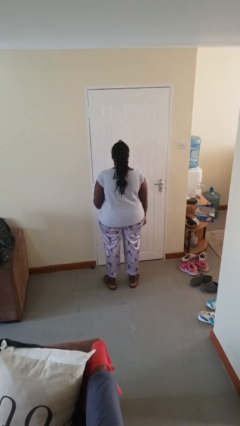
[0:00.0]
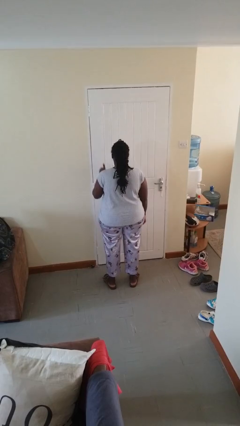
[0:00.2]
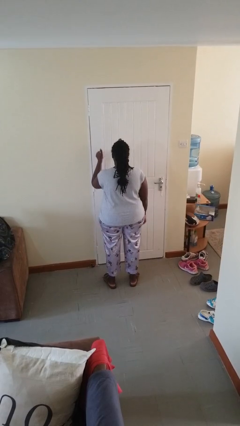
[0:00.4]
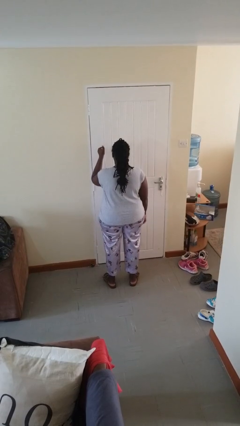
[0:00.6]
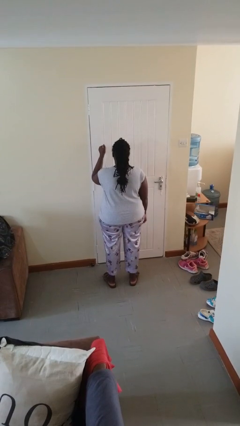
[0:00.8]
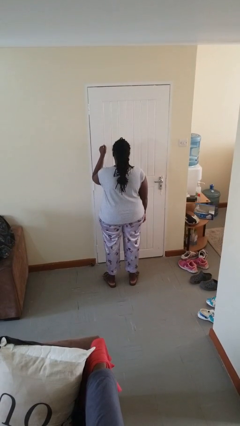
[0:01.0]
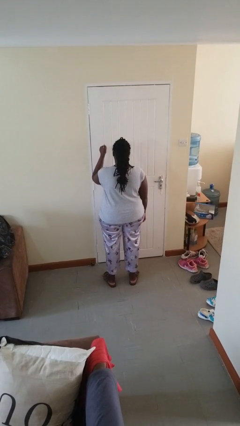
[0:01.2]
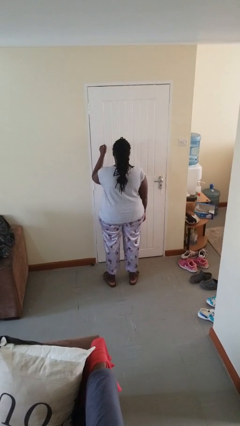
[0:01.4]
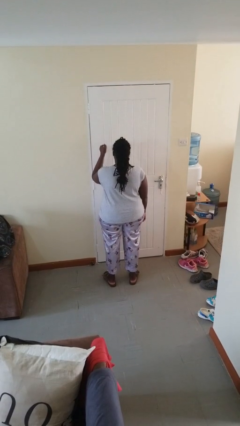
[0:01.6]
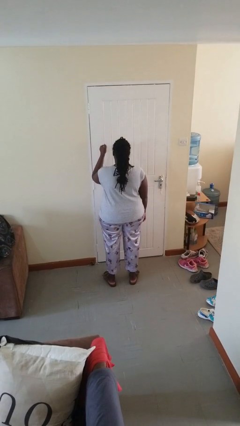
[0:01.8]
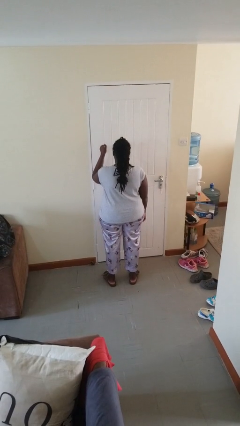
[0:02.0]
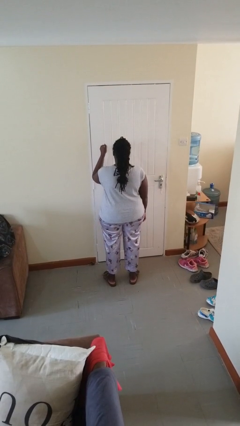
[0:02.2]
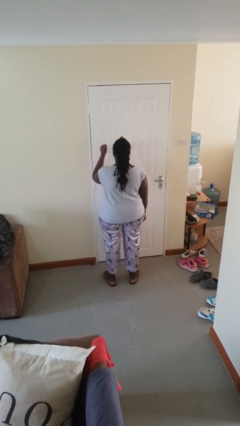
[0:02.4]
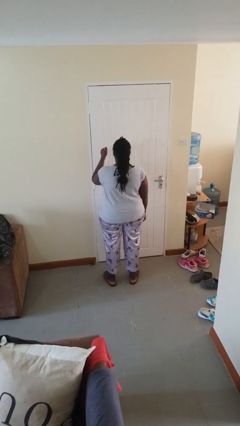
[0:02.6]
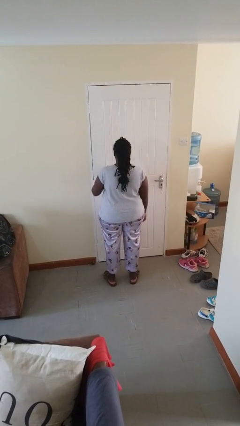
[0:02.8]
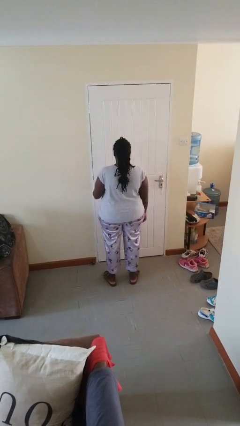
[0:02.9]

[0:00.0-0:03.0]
person gestures thumbs up

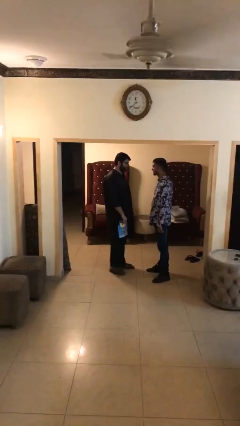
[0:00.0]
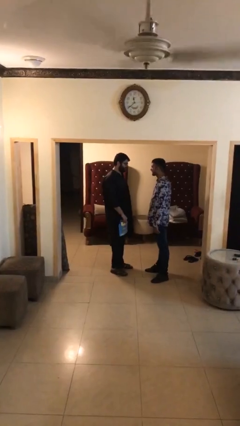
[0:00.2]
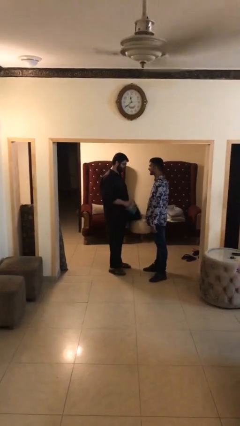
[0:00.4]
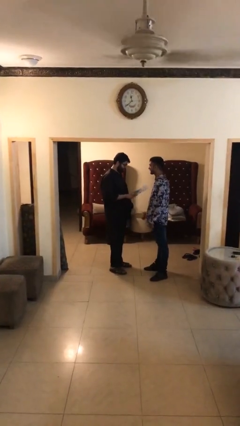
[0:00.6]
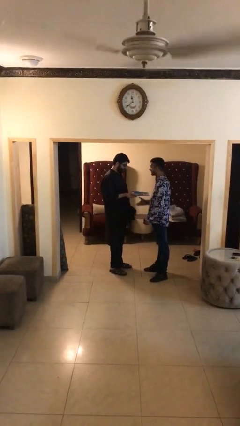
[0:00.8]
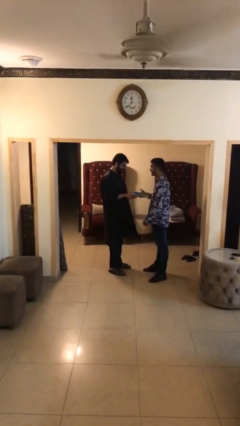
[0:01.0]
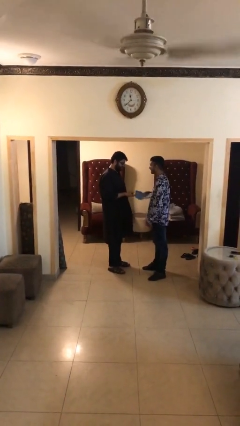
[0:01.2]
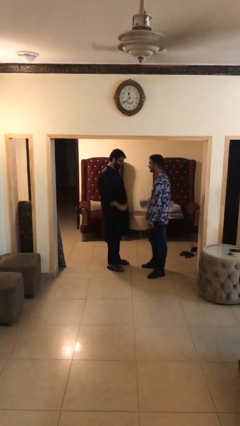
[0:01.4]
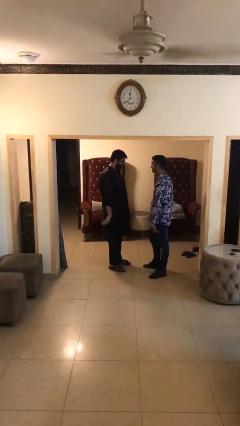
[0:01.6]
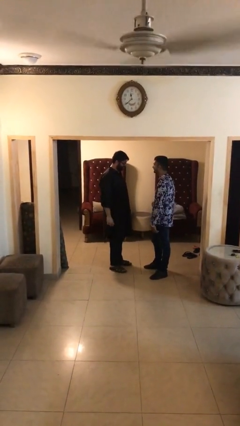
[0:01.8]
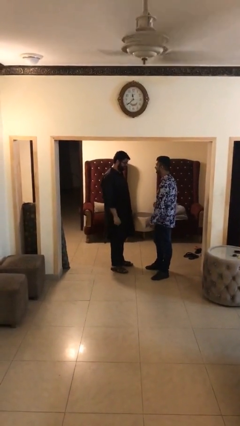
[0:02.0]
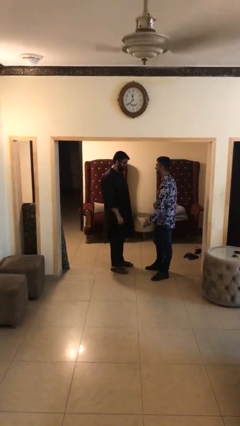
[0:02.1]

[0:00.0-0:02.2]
person transfers object to person

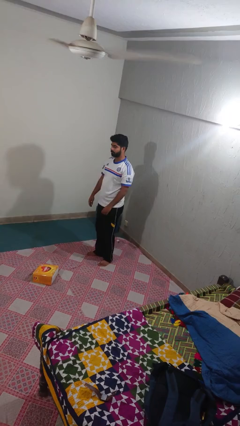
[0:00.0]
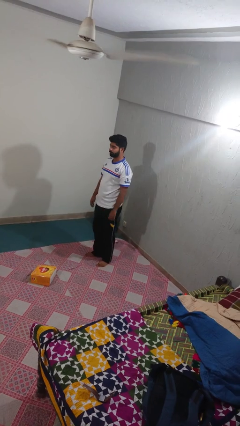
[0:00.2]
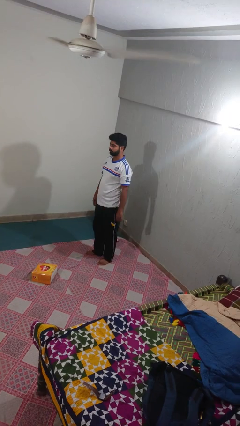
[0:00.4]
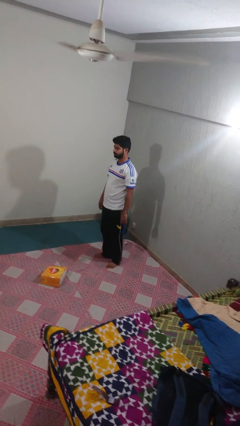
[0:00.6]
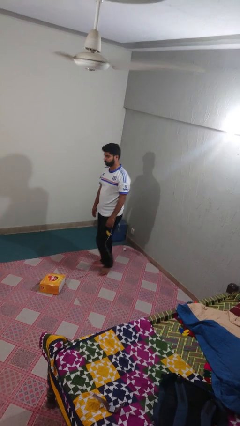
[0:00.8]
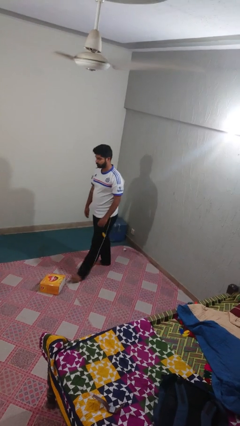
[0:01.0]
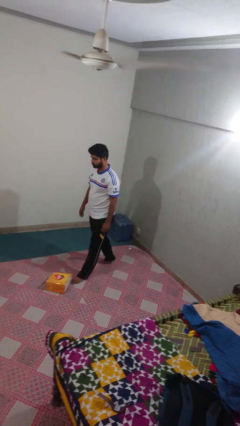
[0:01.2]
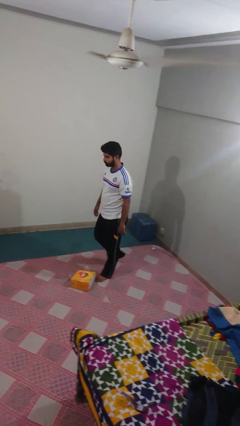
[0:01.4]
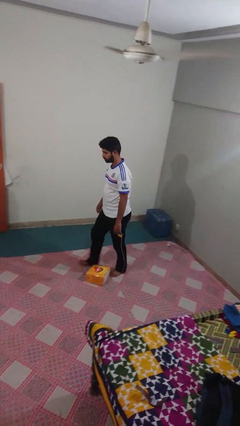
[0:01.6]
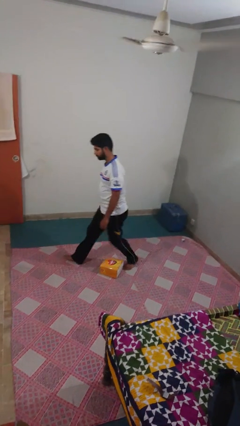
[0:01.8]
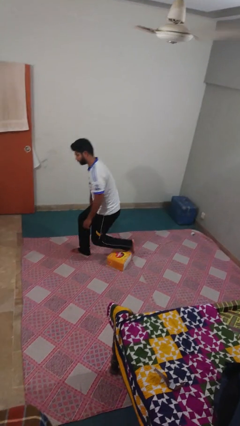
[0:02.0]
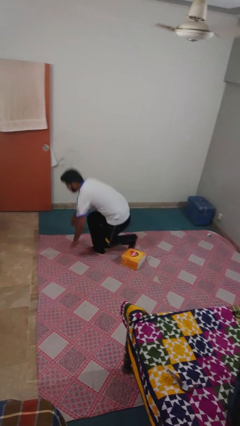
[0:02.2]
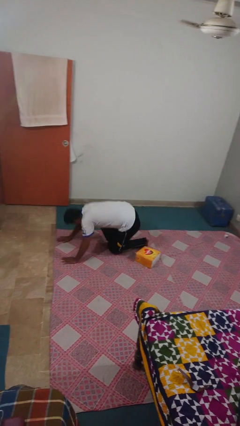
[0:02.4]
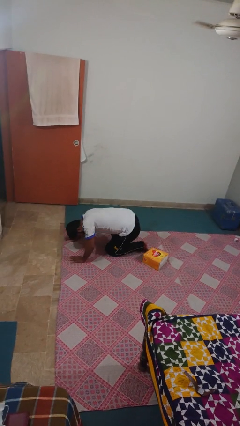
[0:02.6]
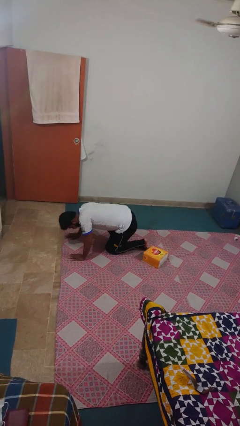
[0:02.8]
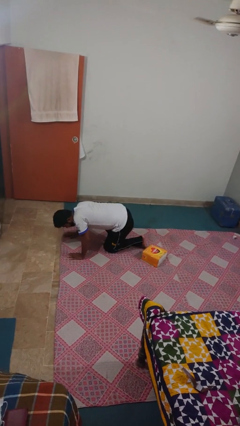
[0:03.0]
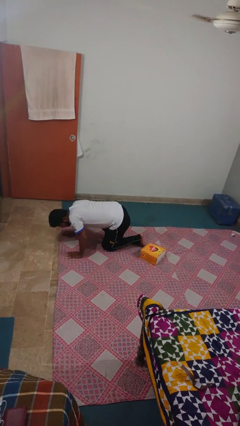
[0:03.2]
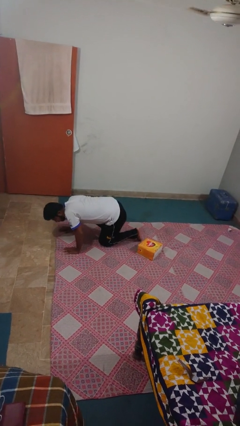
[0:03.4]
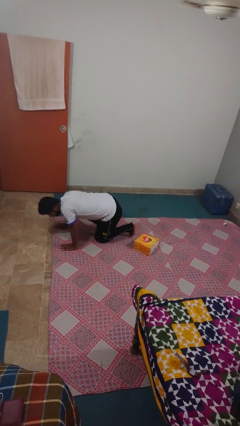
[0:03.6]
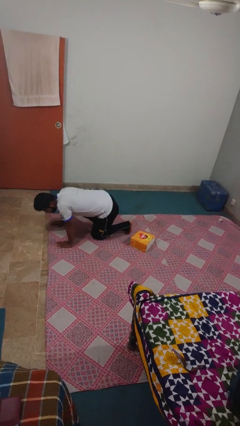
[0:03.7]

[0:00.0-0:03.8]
person trips on object on floor

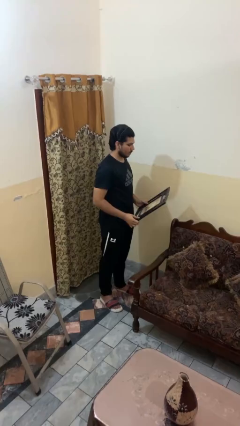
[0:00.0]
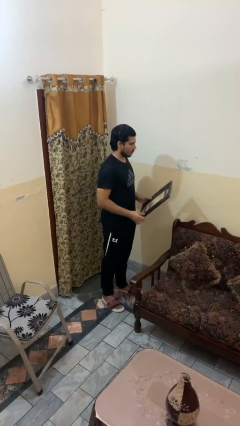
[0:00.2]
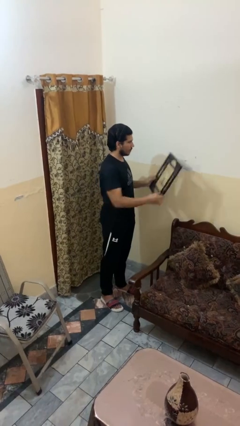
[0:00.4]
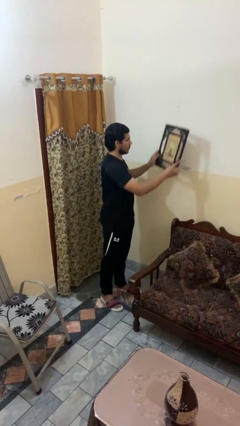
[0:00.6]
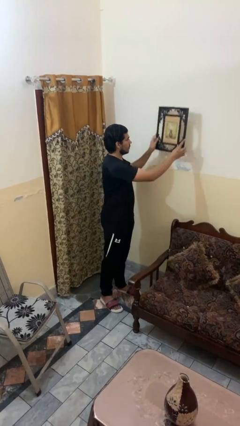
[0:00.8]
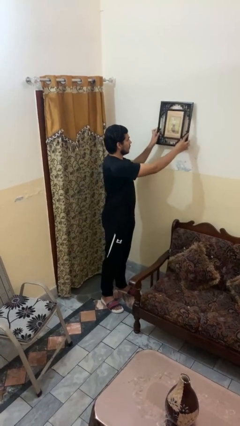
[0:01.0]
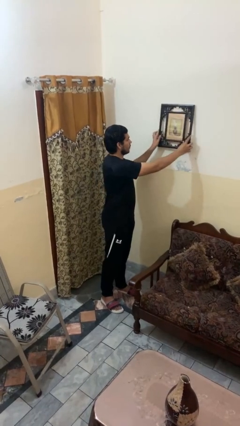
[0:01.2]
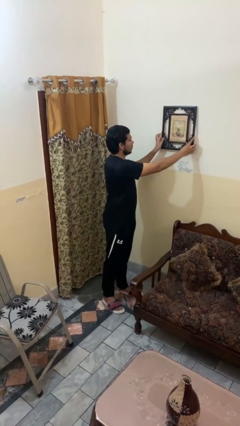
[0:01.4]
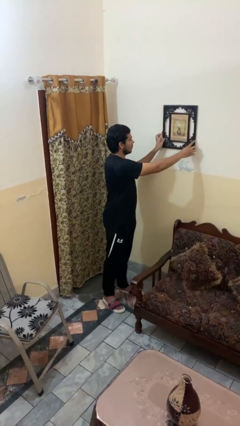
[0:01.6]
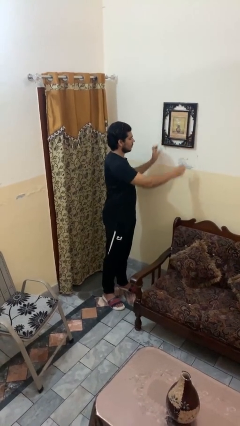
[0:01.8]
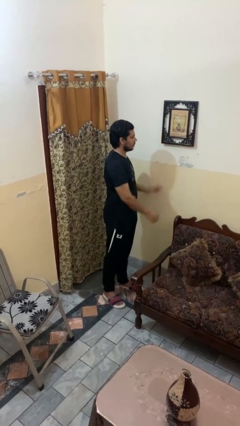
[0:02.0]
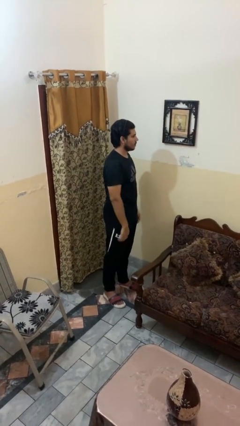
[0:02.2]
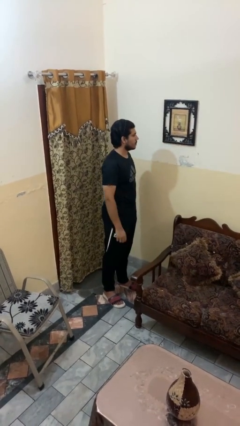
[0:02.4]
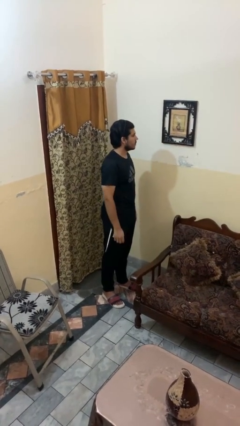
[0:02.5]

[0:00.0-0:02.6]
person puts up picture frame

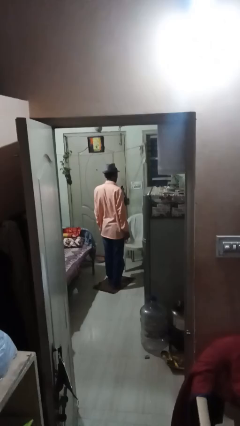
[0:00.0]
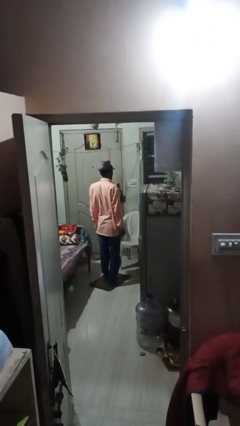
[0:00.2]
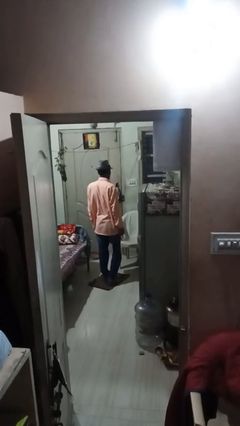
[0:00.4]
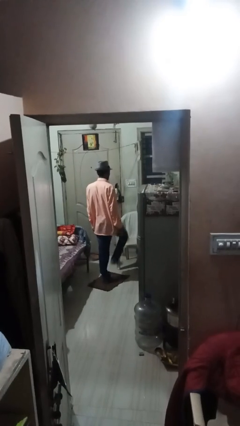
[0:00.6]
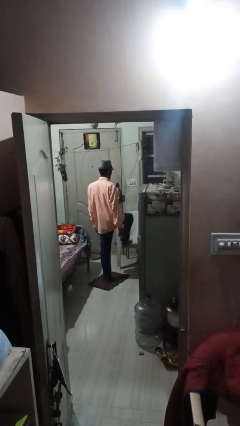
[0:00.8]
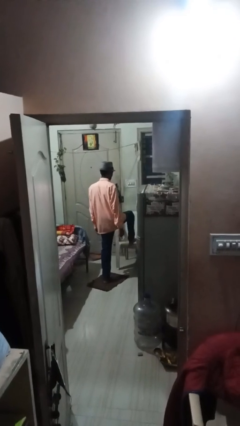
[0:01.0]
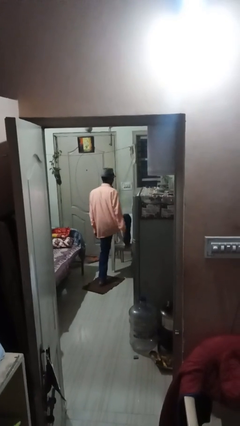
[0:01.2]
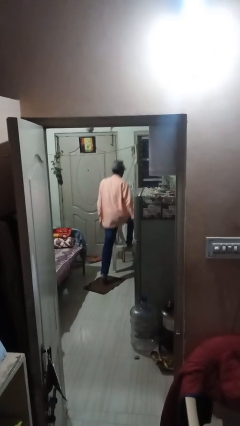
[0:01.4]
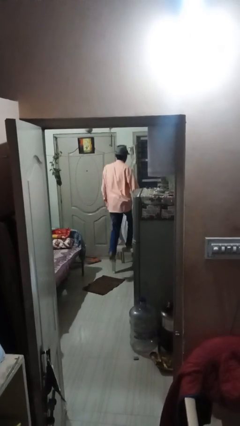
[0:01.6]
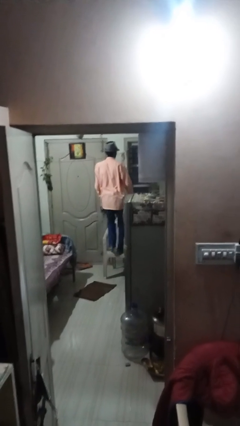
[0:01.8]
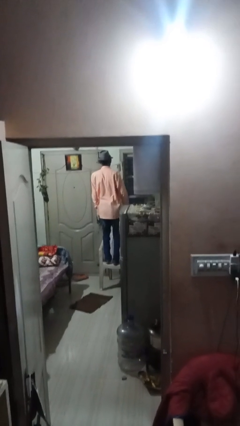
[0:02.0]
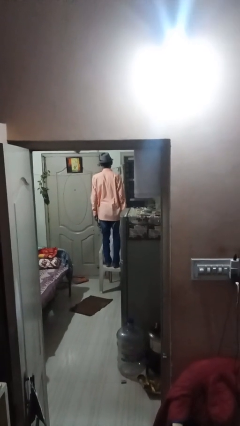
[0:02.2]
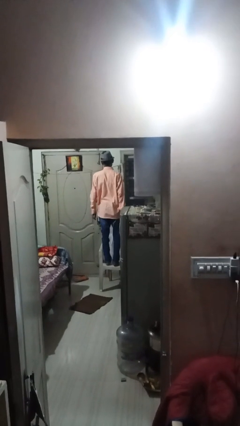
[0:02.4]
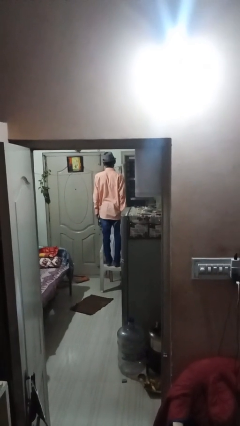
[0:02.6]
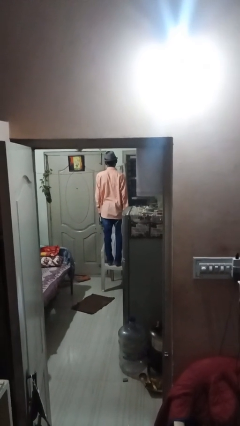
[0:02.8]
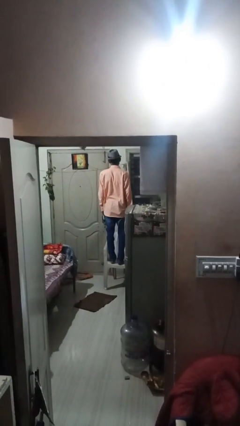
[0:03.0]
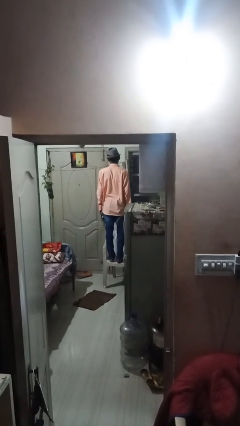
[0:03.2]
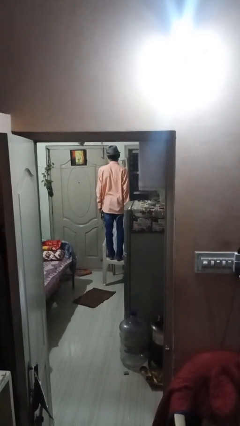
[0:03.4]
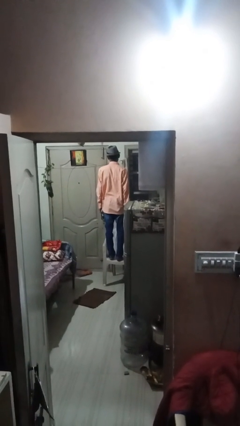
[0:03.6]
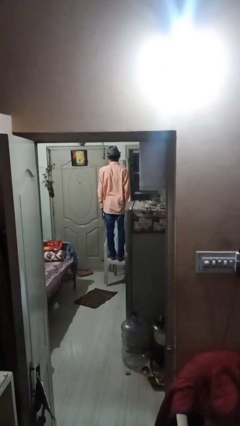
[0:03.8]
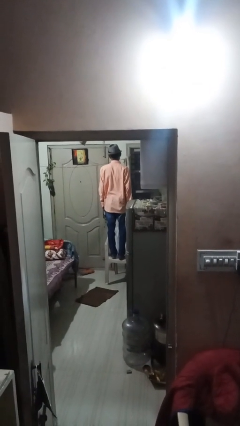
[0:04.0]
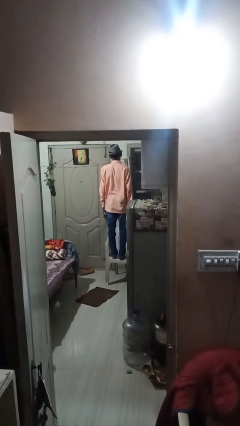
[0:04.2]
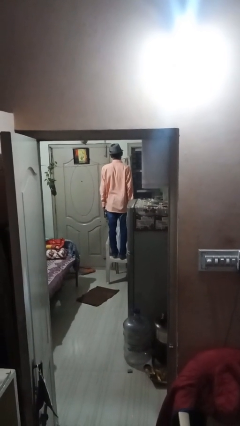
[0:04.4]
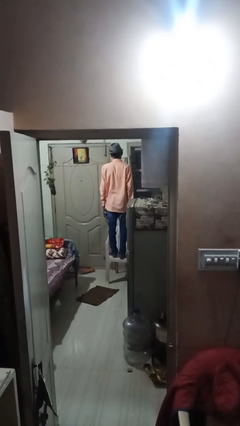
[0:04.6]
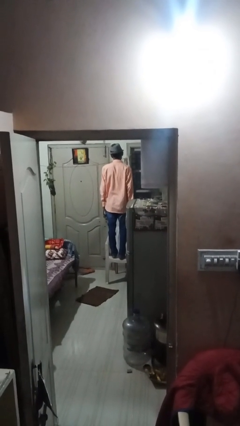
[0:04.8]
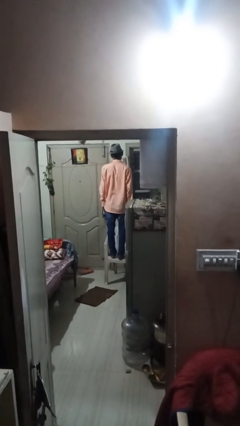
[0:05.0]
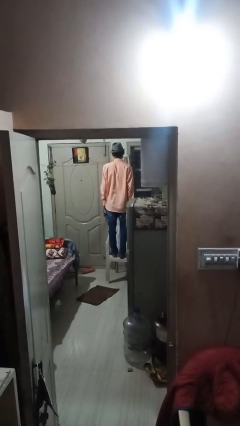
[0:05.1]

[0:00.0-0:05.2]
person climbs on chair

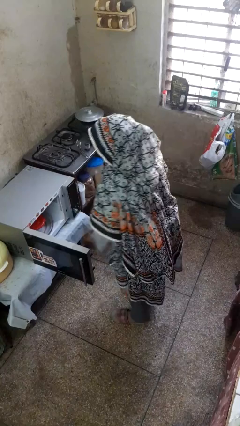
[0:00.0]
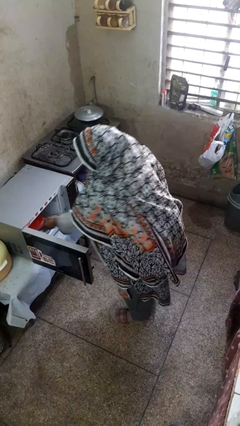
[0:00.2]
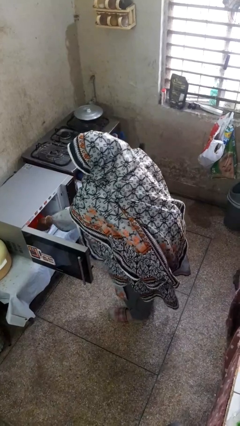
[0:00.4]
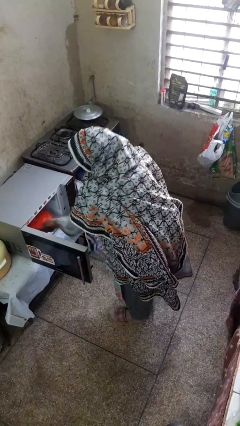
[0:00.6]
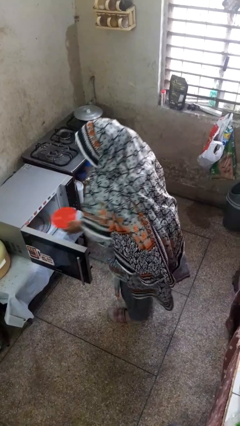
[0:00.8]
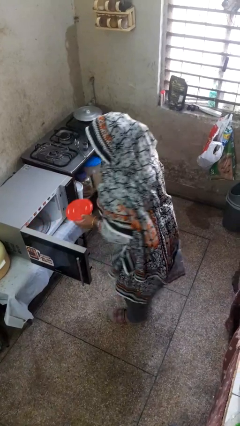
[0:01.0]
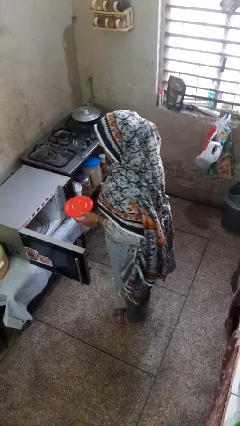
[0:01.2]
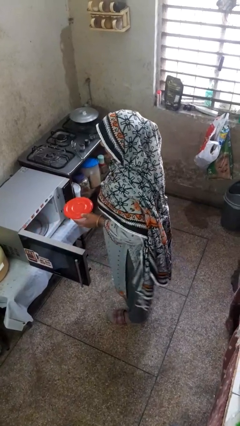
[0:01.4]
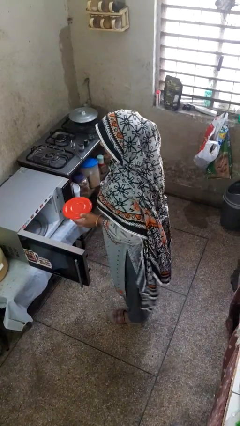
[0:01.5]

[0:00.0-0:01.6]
person takes object from microwave
